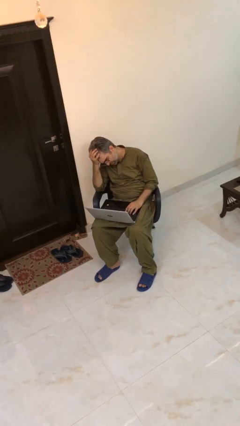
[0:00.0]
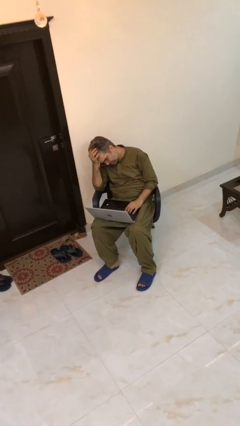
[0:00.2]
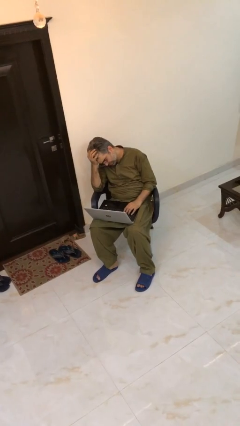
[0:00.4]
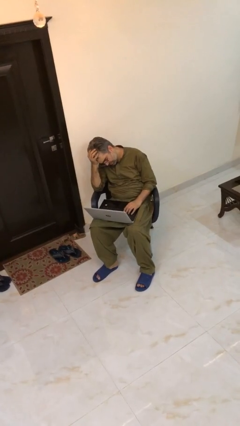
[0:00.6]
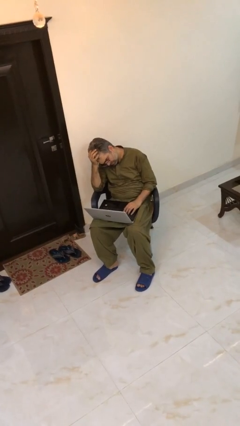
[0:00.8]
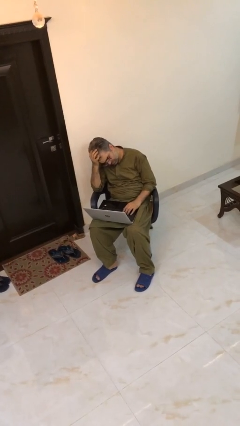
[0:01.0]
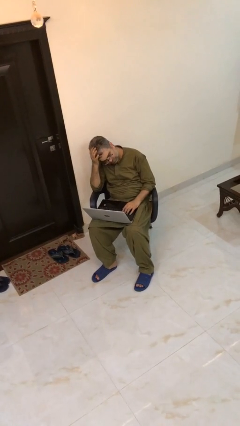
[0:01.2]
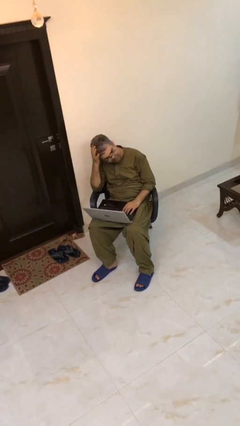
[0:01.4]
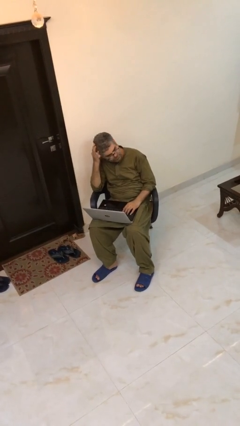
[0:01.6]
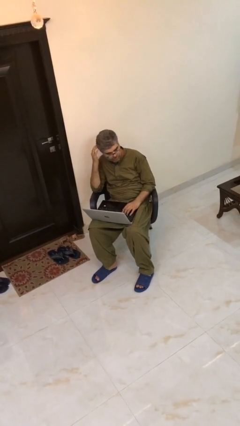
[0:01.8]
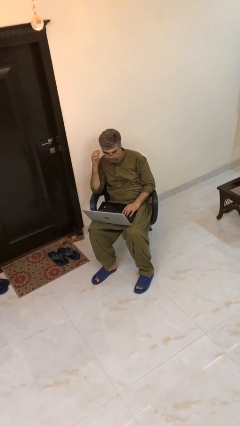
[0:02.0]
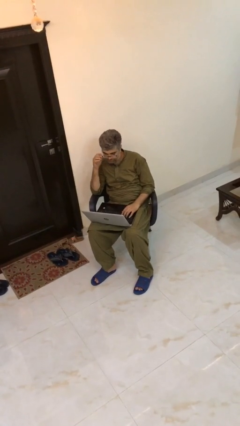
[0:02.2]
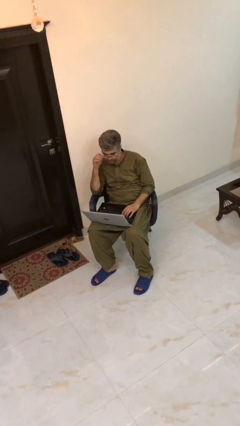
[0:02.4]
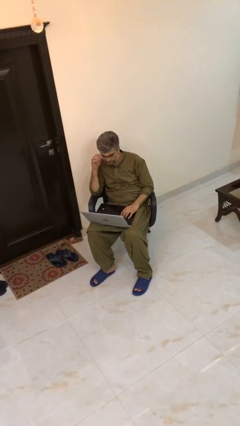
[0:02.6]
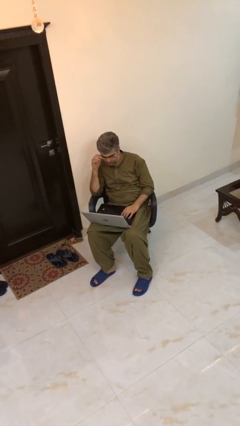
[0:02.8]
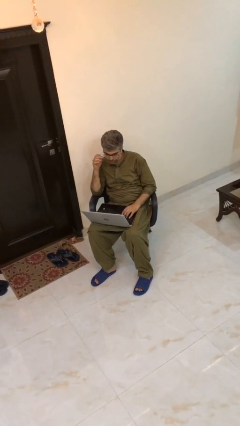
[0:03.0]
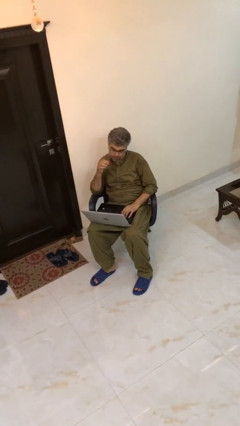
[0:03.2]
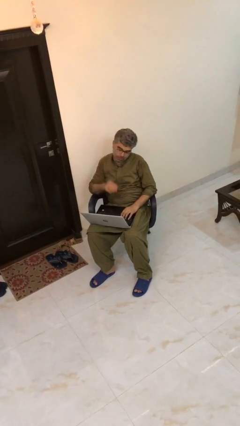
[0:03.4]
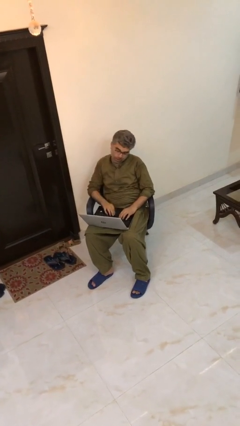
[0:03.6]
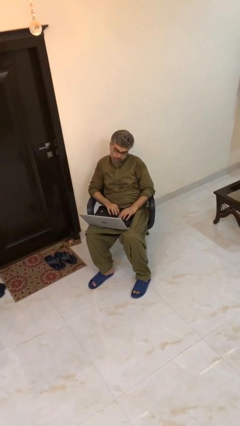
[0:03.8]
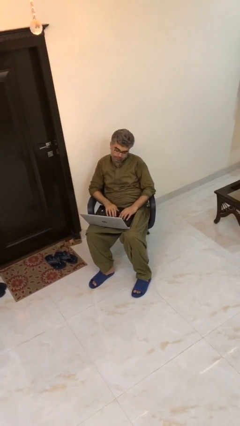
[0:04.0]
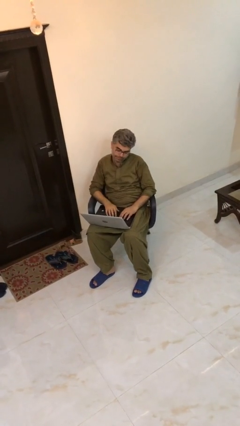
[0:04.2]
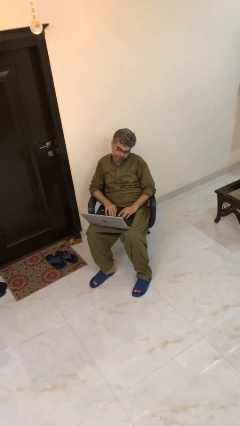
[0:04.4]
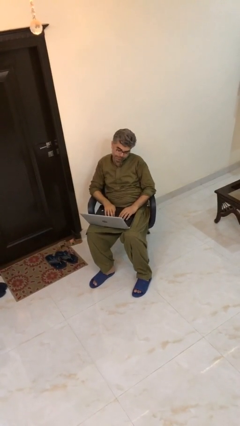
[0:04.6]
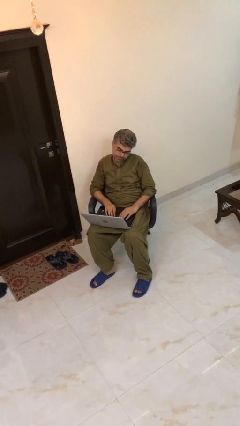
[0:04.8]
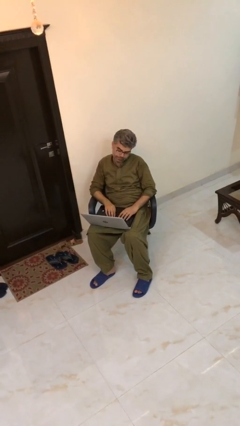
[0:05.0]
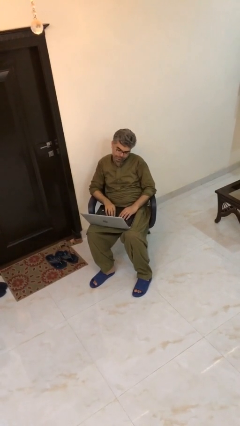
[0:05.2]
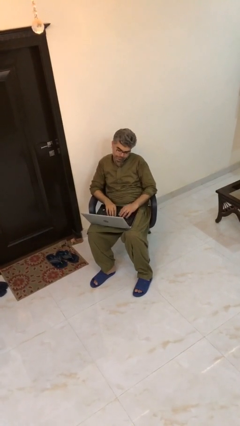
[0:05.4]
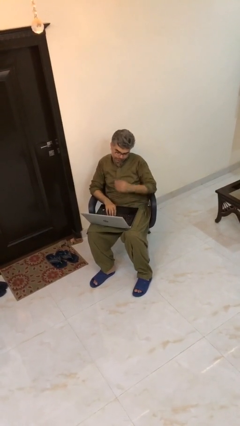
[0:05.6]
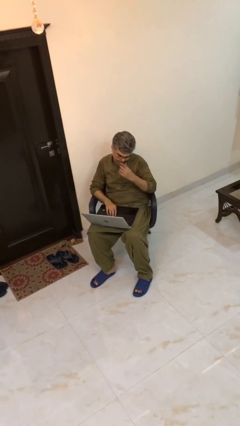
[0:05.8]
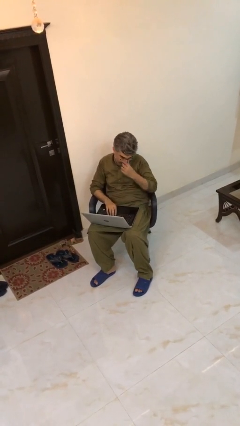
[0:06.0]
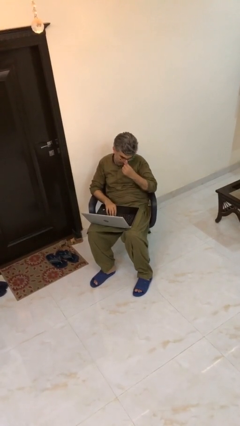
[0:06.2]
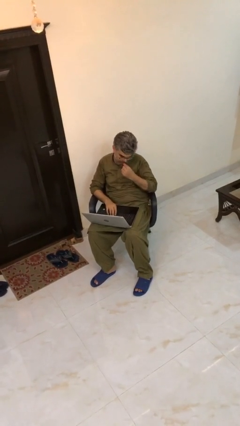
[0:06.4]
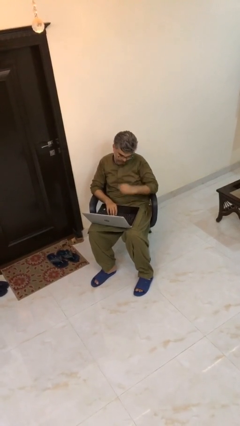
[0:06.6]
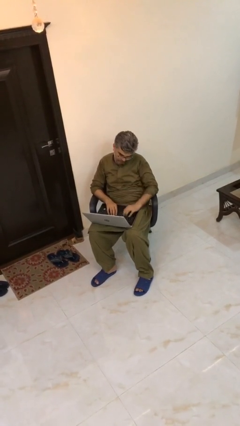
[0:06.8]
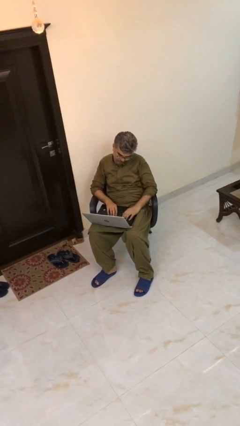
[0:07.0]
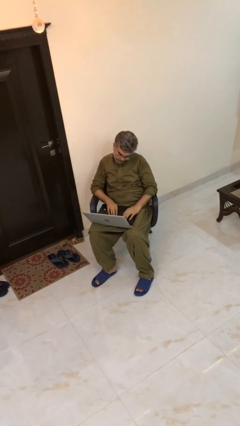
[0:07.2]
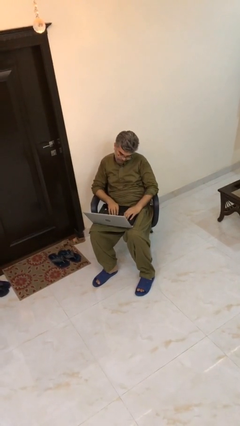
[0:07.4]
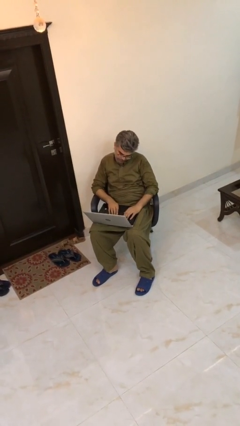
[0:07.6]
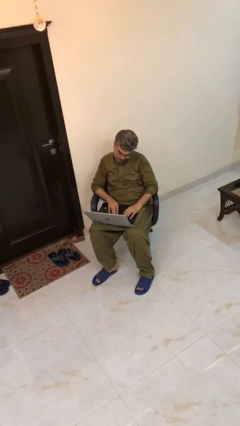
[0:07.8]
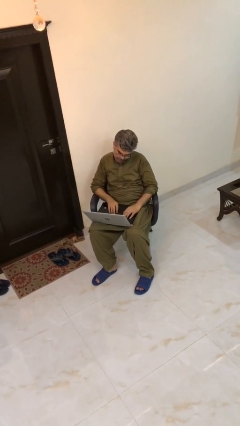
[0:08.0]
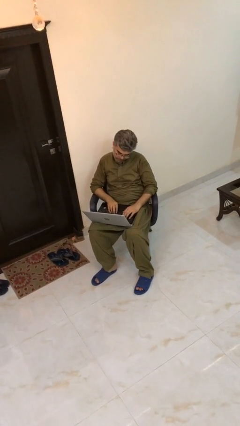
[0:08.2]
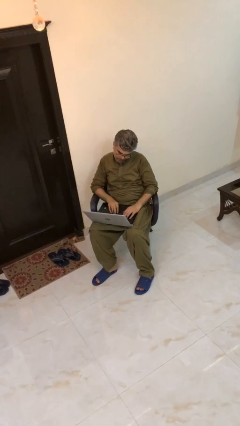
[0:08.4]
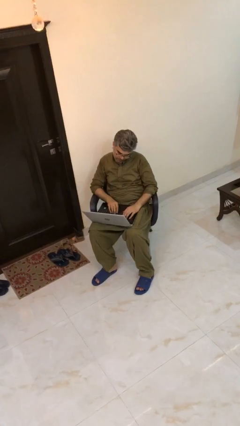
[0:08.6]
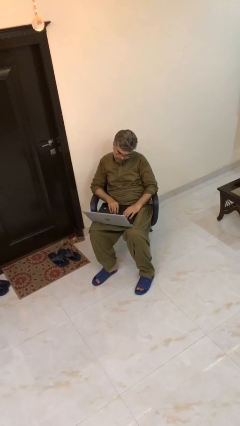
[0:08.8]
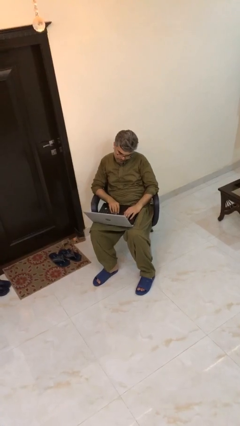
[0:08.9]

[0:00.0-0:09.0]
person interacts with laptop

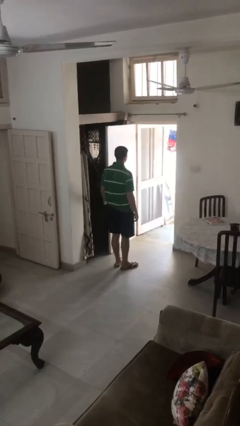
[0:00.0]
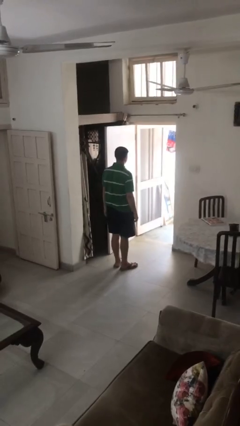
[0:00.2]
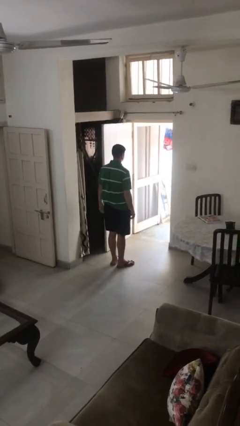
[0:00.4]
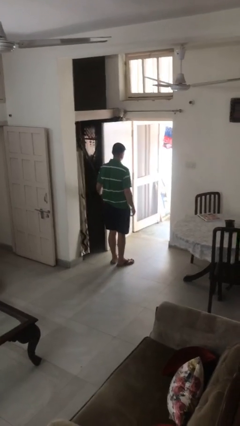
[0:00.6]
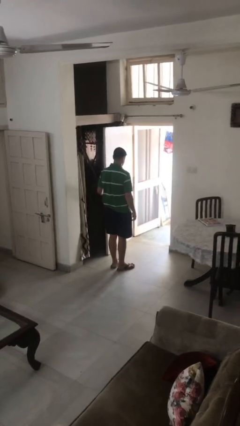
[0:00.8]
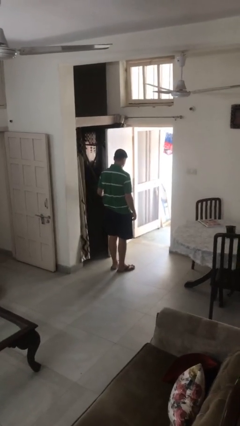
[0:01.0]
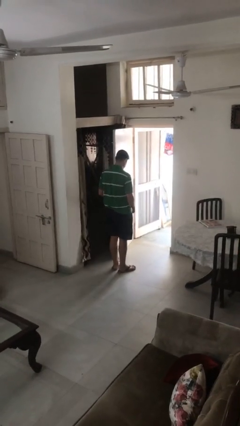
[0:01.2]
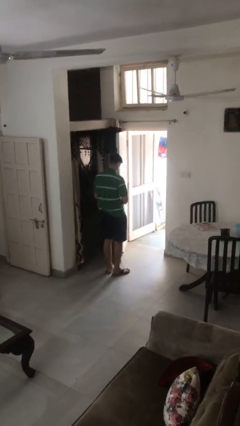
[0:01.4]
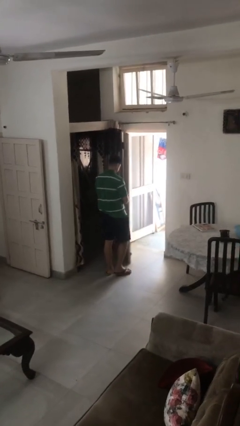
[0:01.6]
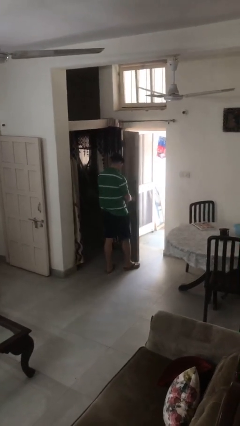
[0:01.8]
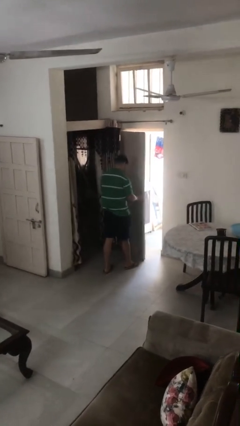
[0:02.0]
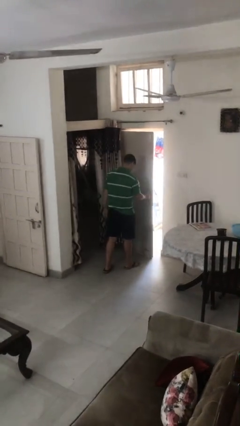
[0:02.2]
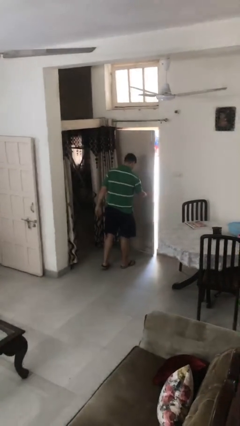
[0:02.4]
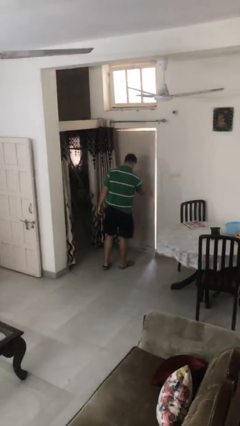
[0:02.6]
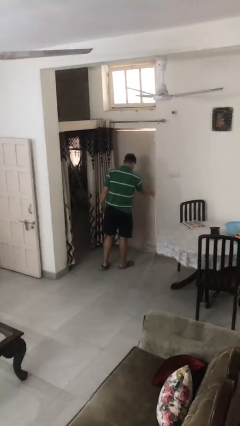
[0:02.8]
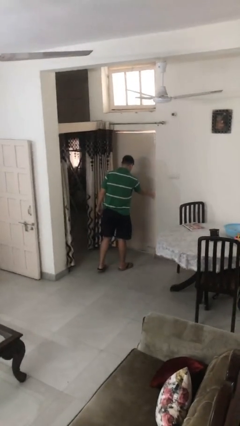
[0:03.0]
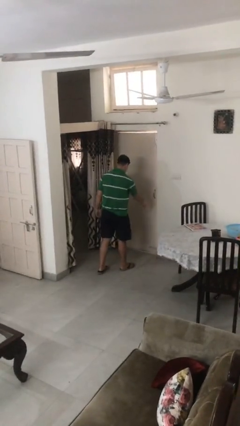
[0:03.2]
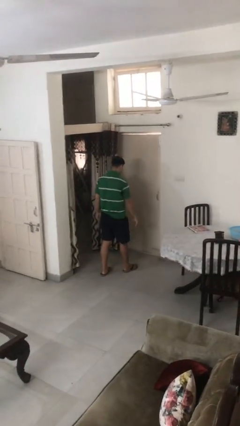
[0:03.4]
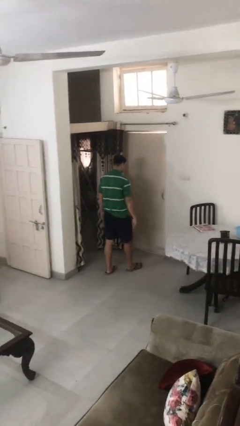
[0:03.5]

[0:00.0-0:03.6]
person closes facility door

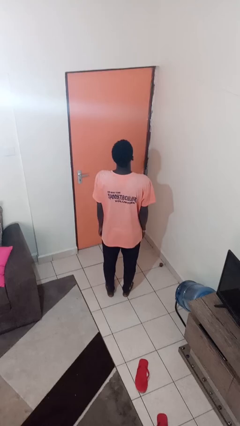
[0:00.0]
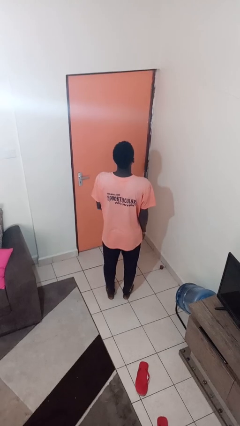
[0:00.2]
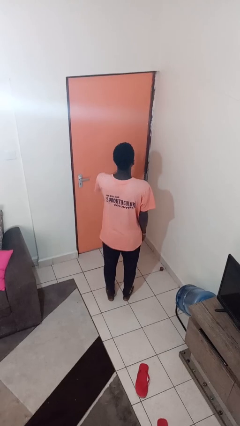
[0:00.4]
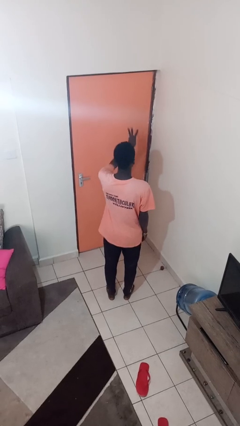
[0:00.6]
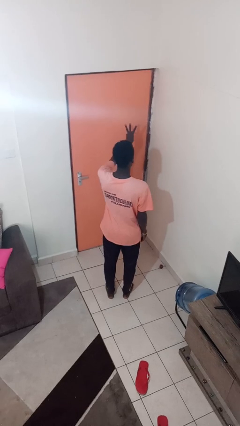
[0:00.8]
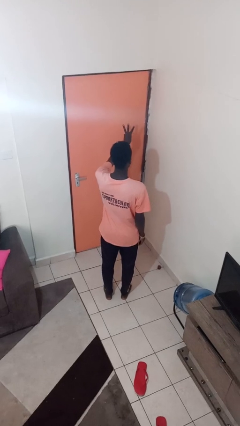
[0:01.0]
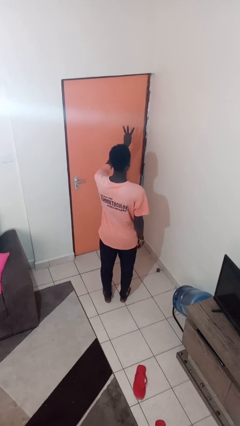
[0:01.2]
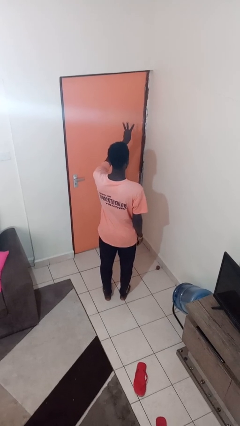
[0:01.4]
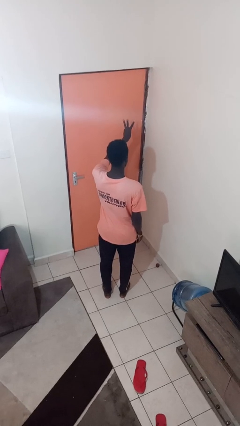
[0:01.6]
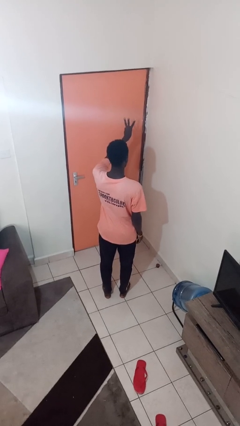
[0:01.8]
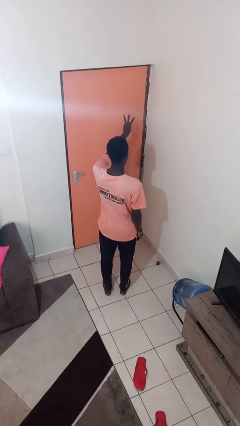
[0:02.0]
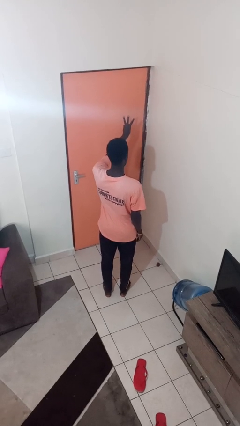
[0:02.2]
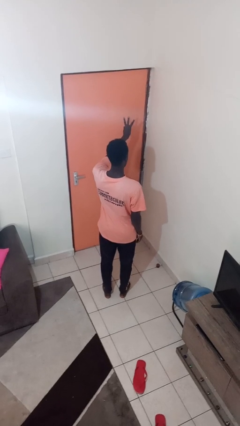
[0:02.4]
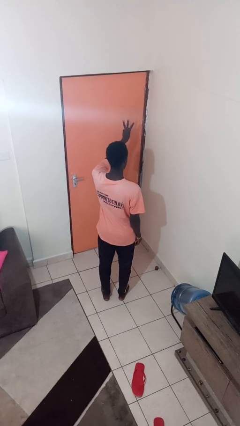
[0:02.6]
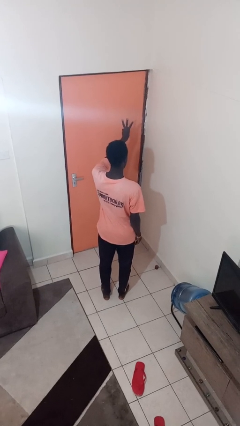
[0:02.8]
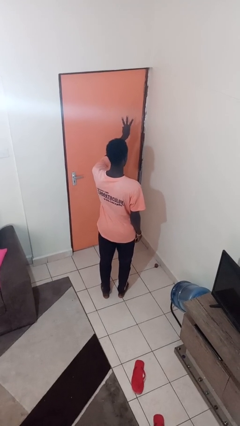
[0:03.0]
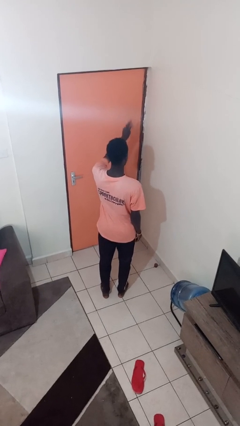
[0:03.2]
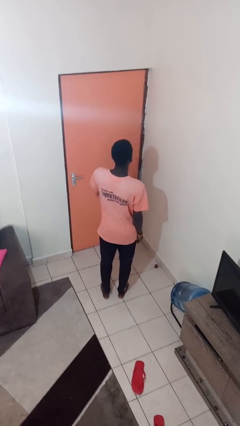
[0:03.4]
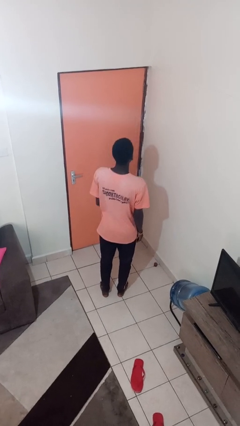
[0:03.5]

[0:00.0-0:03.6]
person gestures number three

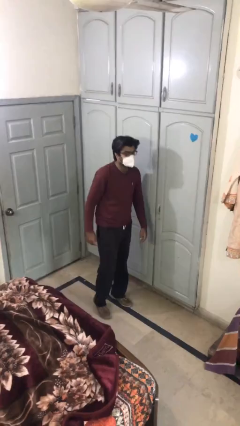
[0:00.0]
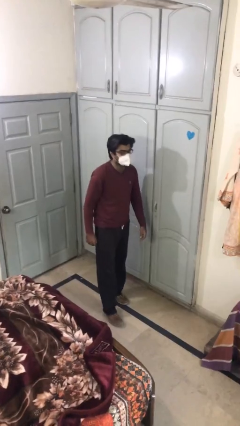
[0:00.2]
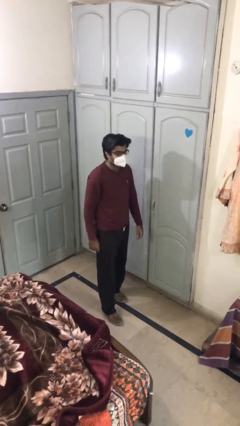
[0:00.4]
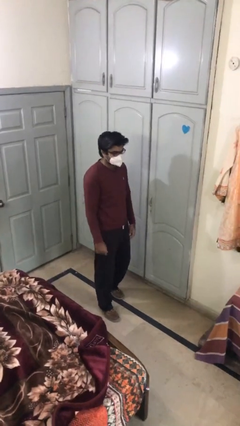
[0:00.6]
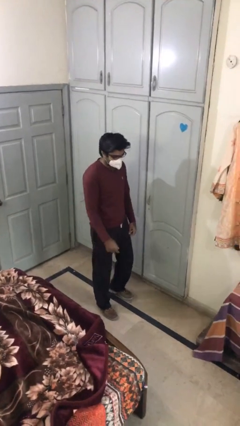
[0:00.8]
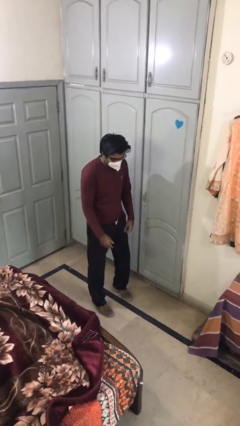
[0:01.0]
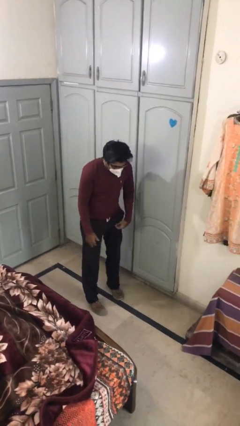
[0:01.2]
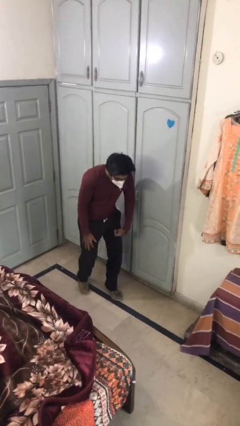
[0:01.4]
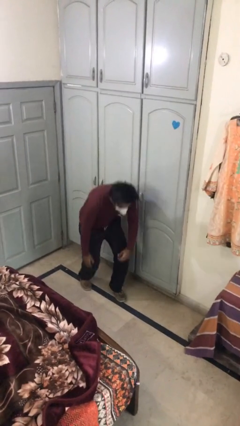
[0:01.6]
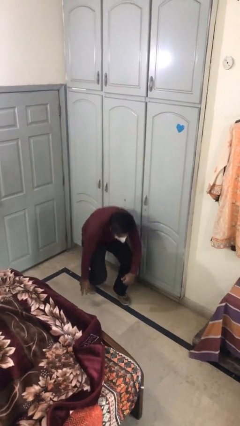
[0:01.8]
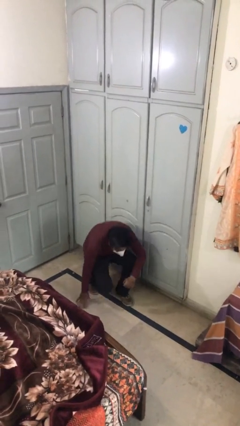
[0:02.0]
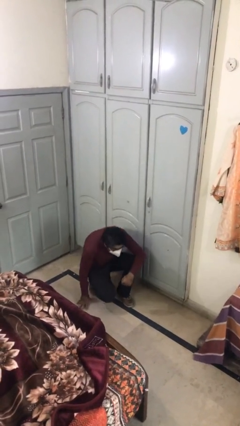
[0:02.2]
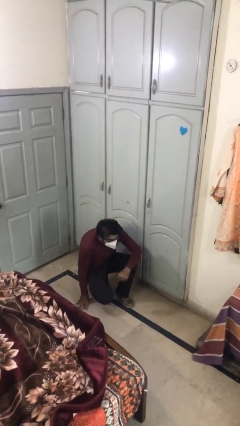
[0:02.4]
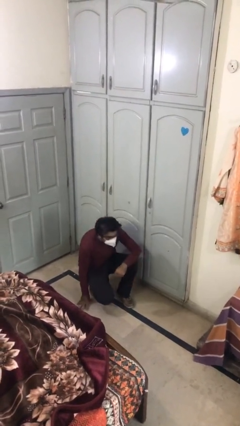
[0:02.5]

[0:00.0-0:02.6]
person sits down
